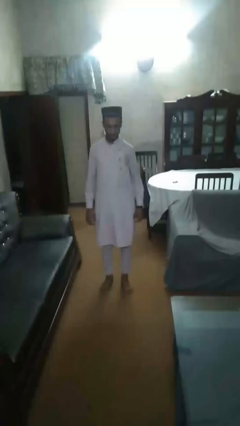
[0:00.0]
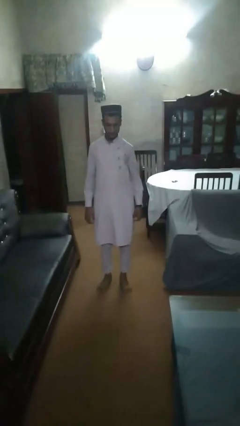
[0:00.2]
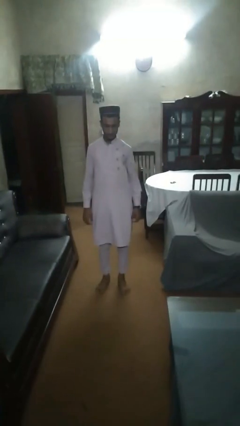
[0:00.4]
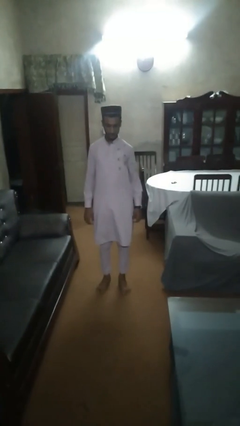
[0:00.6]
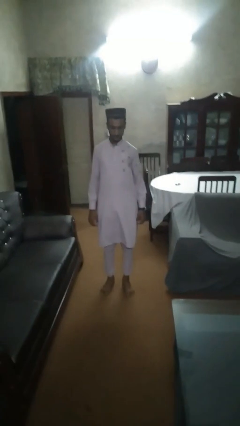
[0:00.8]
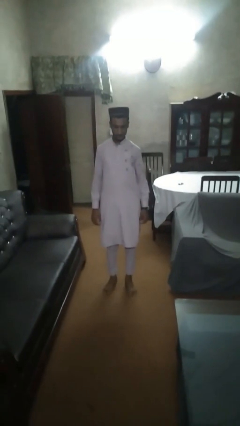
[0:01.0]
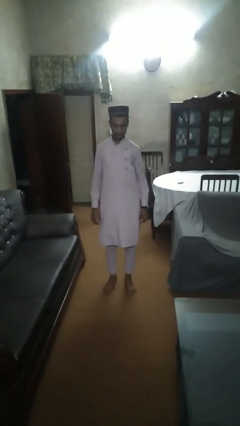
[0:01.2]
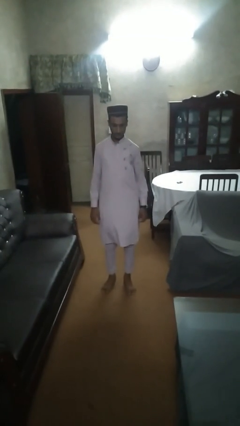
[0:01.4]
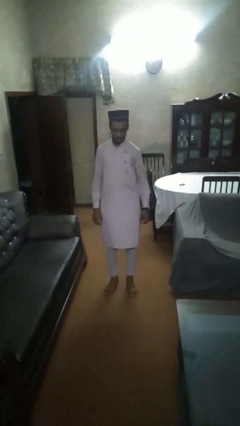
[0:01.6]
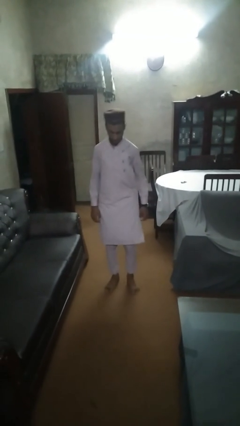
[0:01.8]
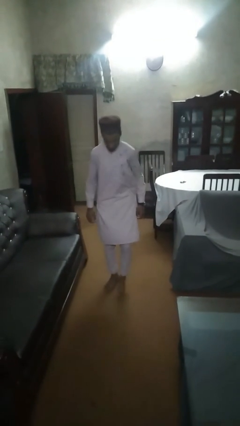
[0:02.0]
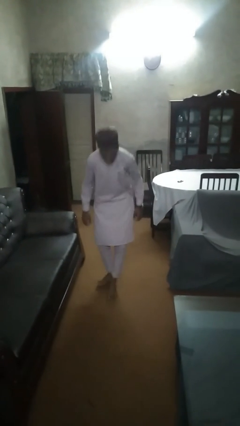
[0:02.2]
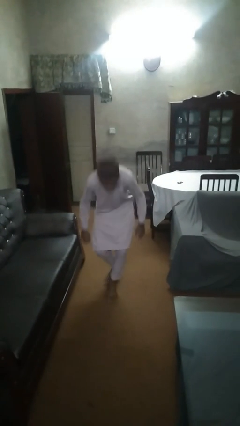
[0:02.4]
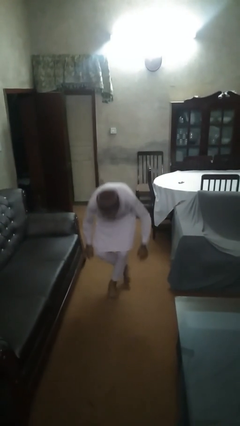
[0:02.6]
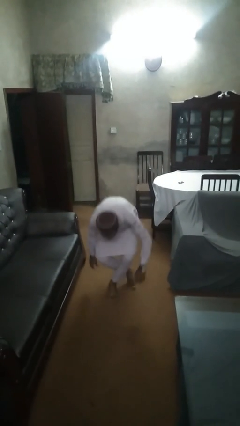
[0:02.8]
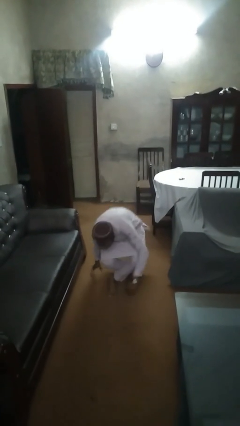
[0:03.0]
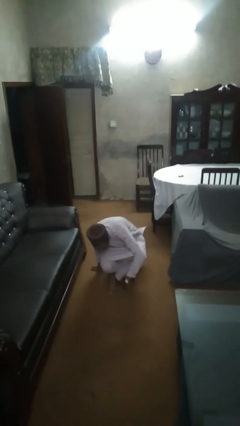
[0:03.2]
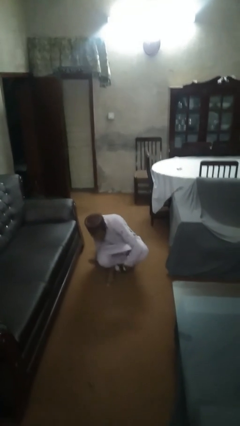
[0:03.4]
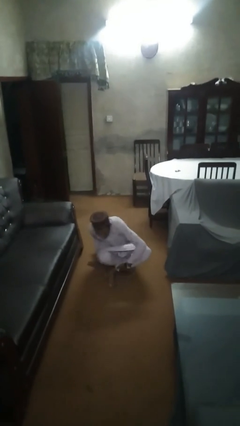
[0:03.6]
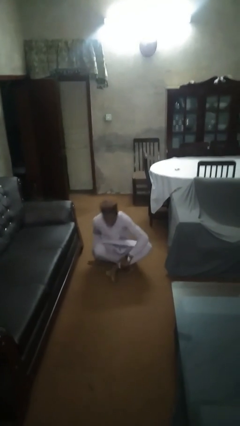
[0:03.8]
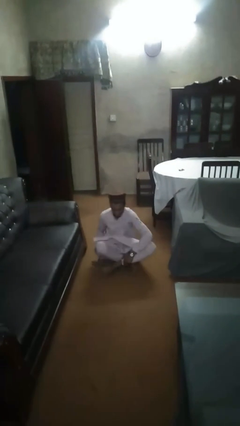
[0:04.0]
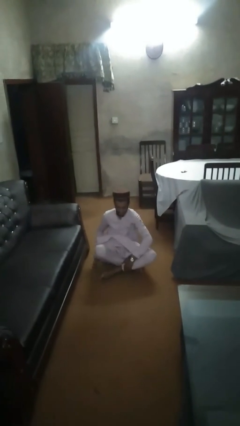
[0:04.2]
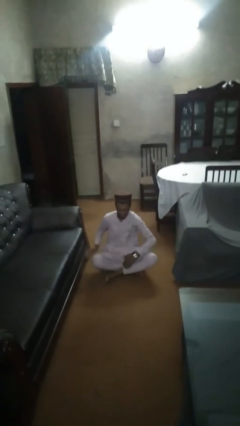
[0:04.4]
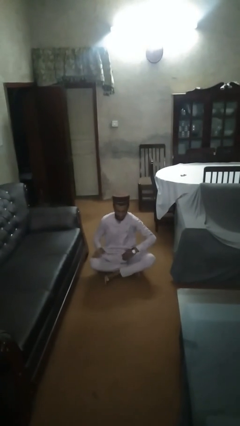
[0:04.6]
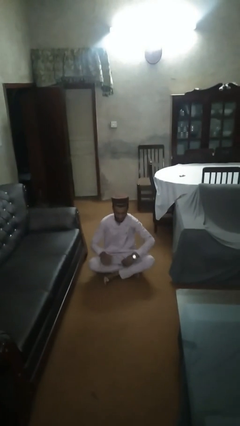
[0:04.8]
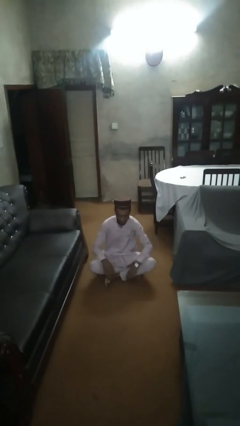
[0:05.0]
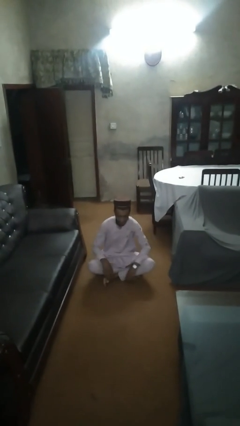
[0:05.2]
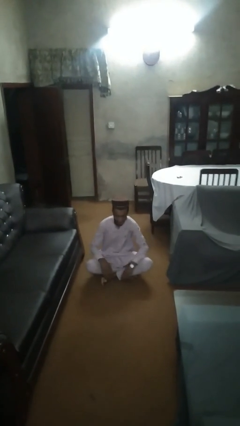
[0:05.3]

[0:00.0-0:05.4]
person sits crisscross

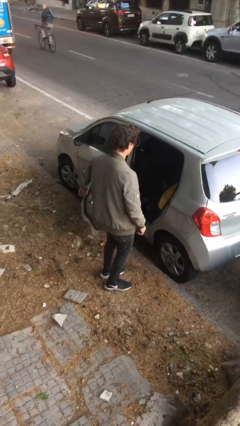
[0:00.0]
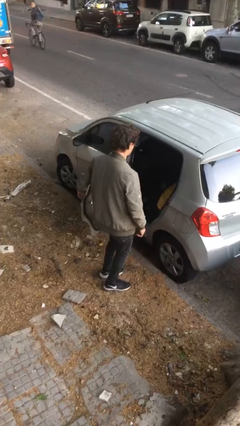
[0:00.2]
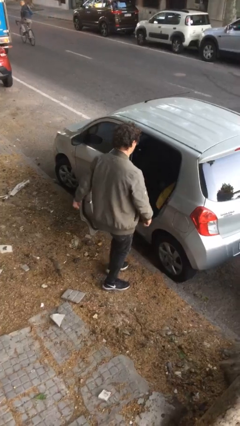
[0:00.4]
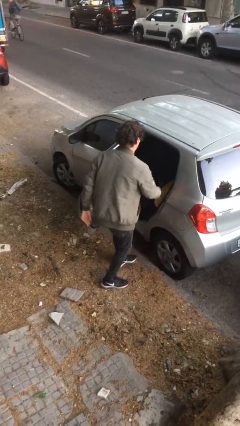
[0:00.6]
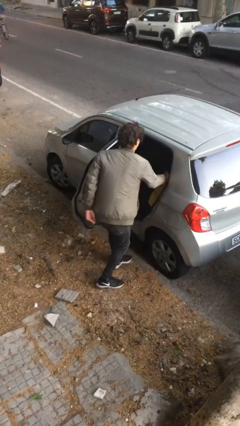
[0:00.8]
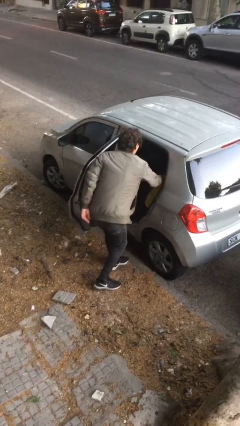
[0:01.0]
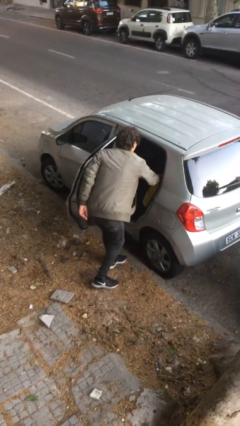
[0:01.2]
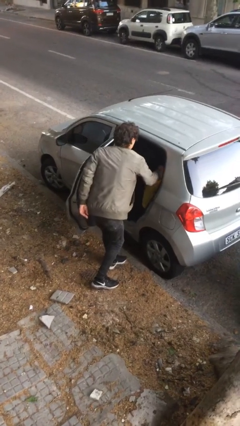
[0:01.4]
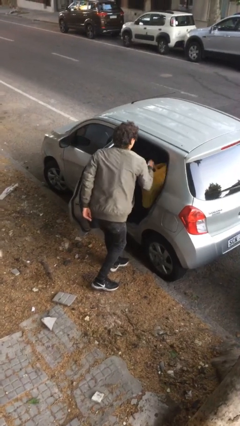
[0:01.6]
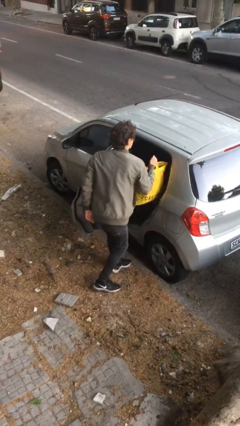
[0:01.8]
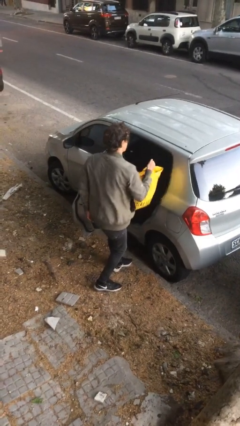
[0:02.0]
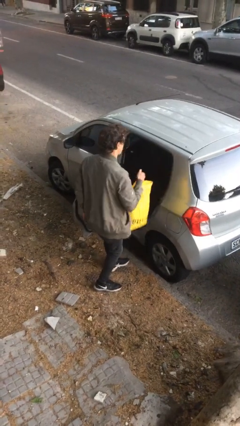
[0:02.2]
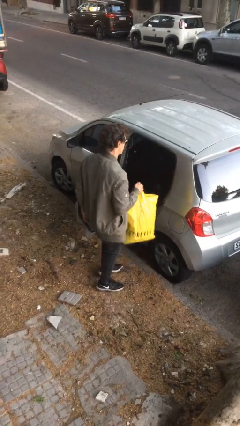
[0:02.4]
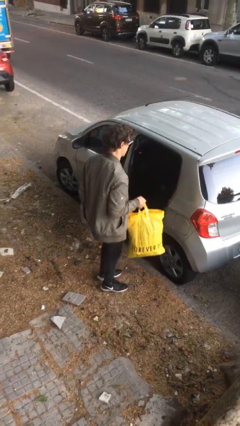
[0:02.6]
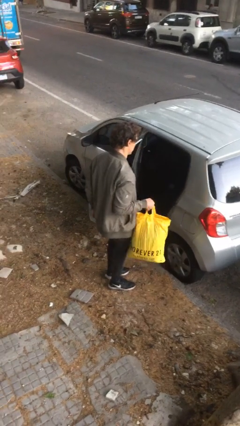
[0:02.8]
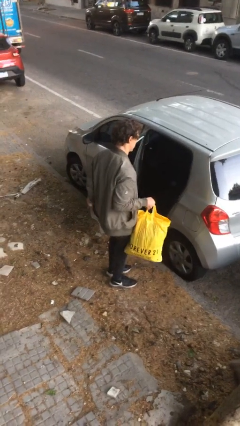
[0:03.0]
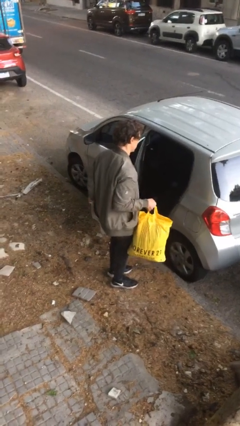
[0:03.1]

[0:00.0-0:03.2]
person unloads car

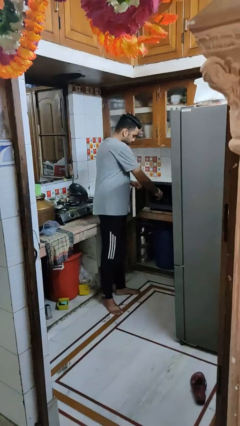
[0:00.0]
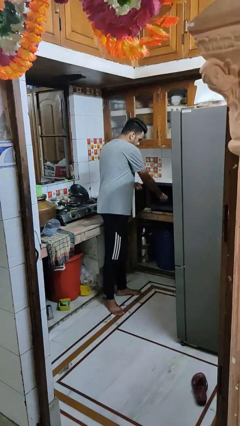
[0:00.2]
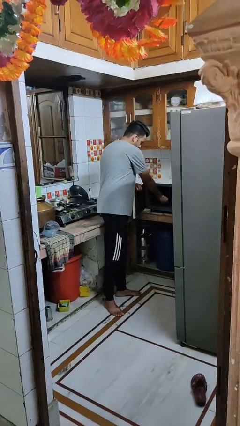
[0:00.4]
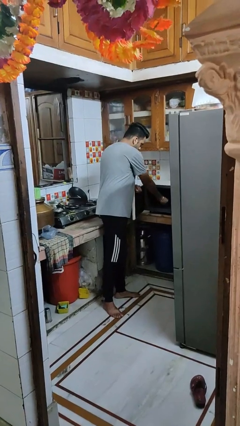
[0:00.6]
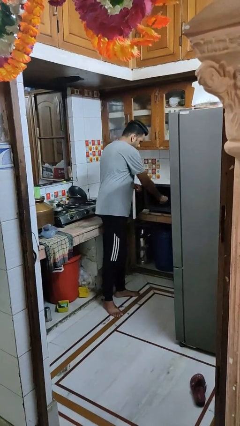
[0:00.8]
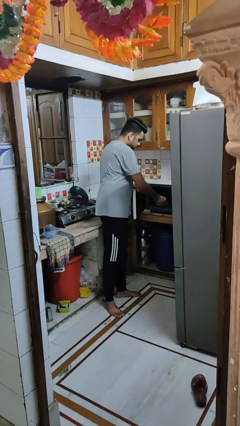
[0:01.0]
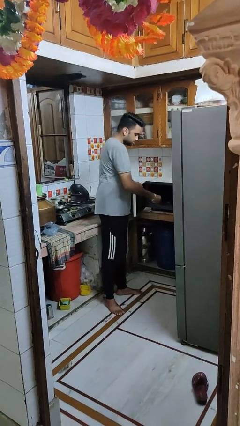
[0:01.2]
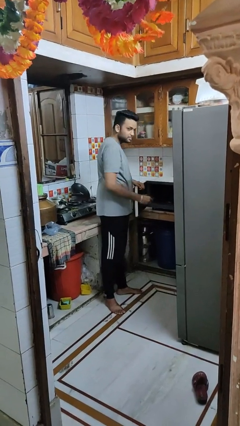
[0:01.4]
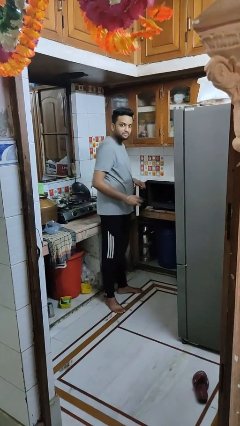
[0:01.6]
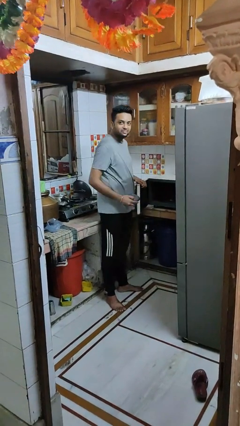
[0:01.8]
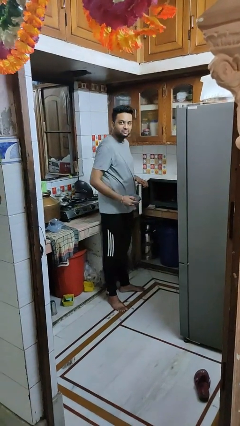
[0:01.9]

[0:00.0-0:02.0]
person takes object from microwave

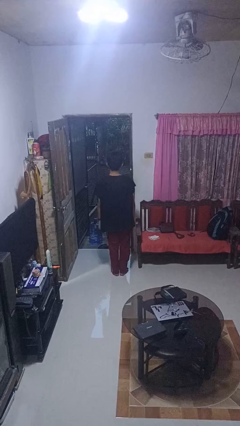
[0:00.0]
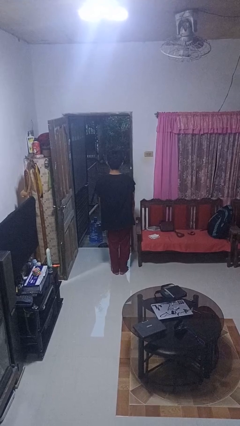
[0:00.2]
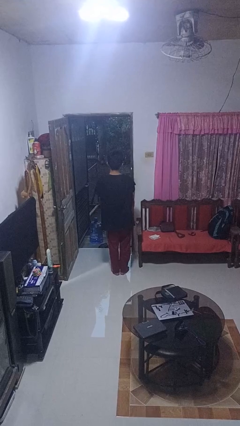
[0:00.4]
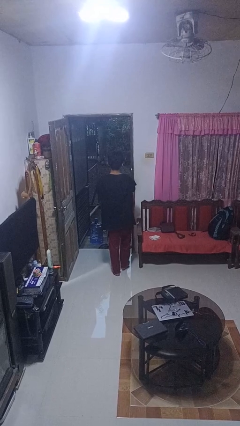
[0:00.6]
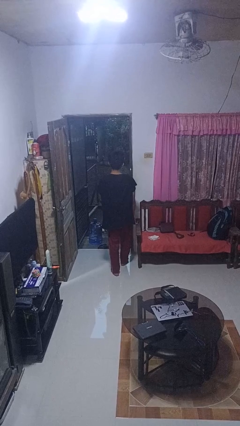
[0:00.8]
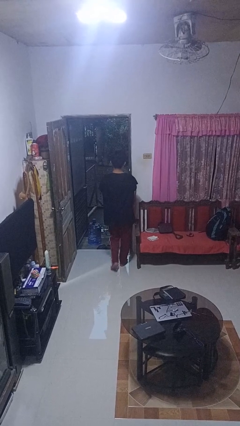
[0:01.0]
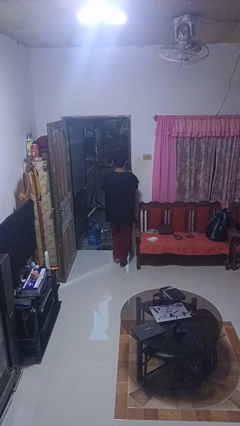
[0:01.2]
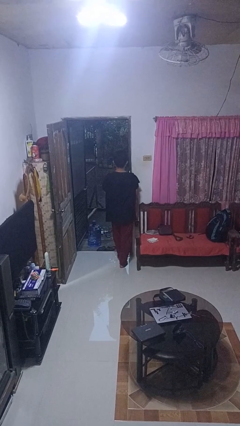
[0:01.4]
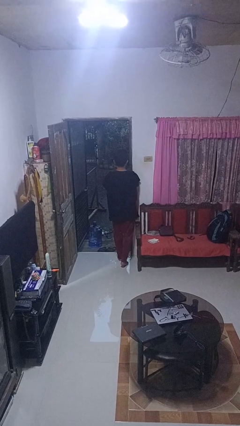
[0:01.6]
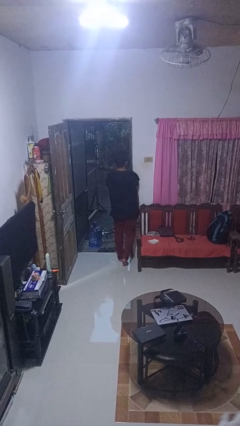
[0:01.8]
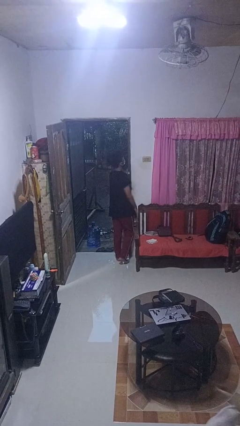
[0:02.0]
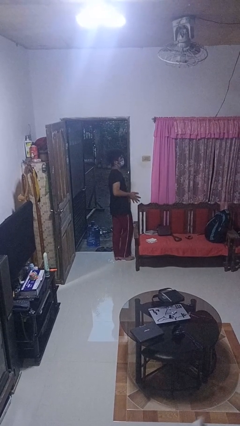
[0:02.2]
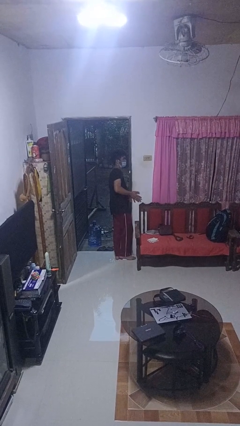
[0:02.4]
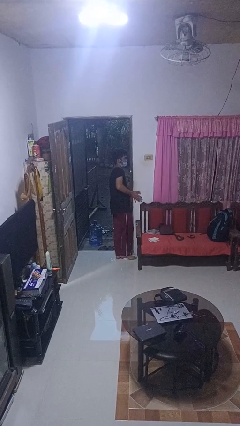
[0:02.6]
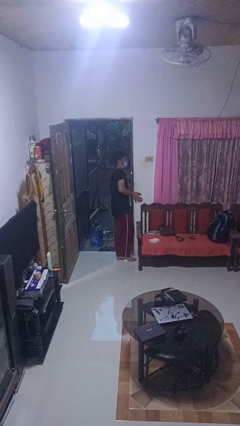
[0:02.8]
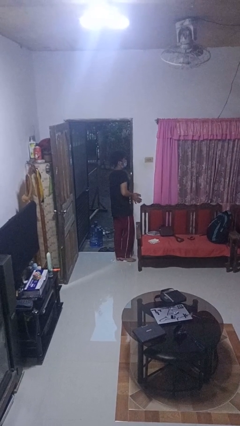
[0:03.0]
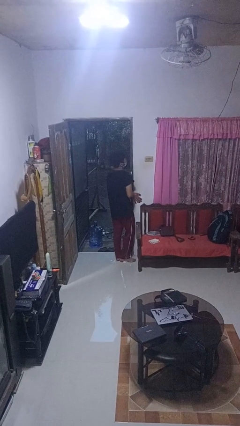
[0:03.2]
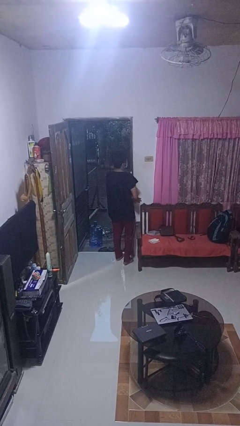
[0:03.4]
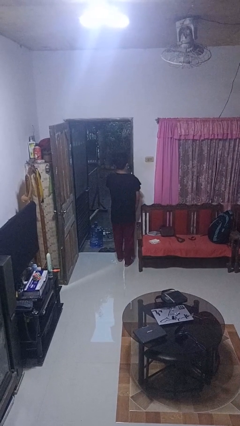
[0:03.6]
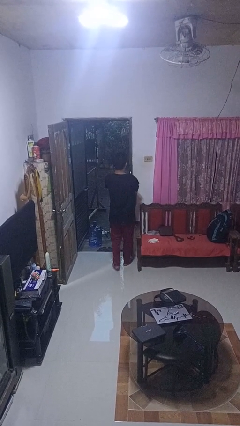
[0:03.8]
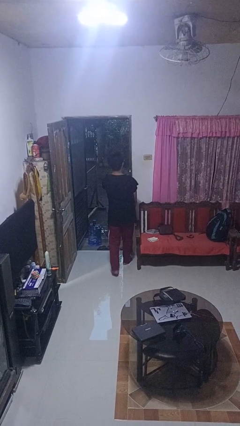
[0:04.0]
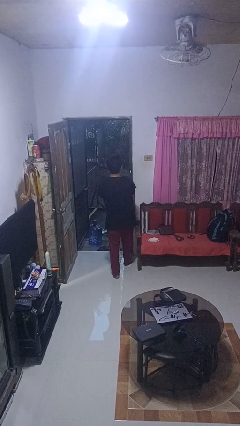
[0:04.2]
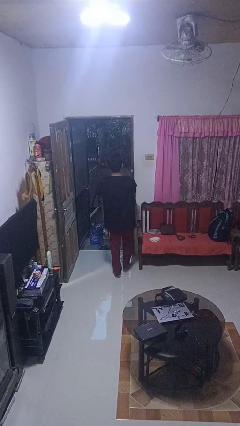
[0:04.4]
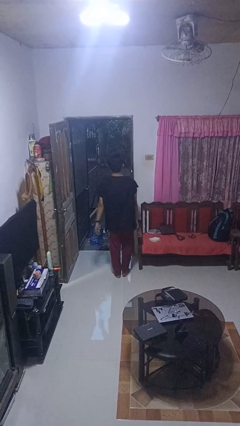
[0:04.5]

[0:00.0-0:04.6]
person bumps into wall

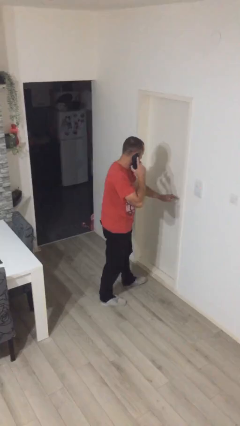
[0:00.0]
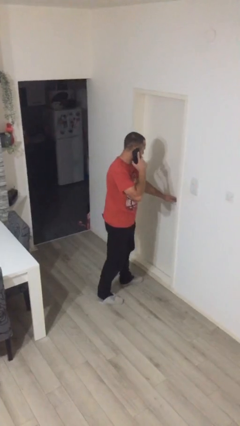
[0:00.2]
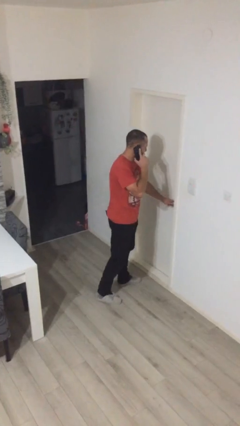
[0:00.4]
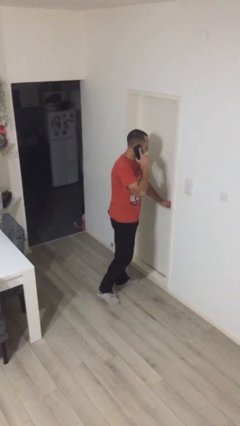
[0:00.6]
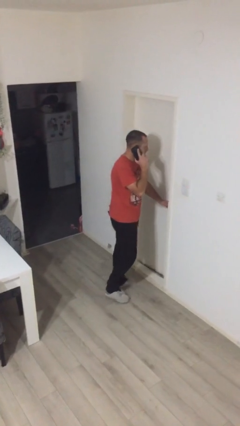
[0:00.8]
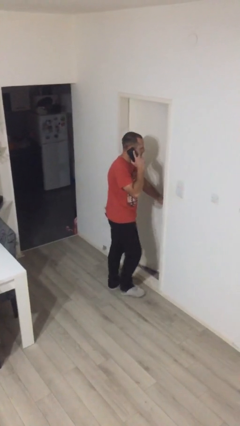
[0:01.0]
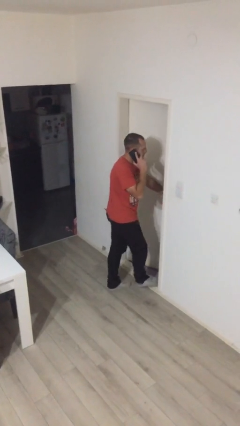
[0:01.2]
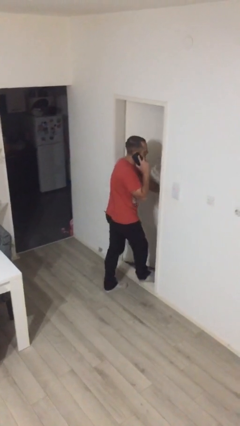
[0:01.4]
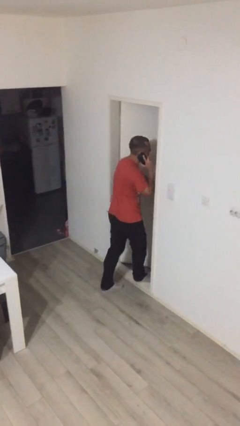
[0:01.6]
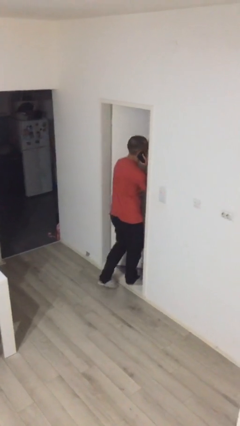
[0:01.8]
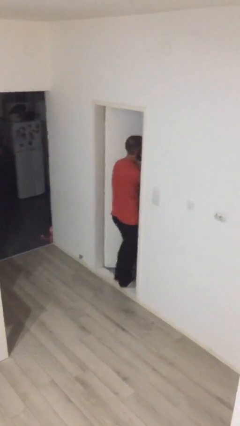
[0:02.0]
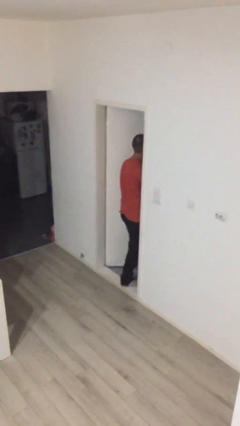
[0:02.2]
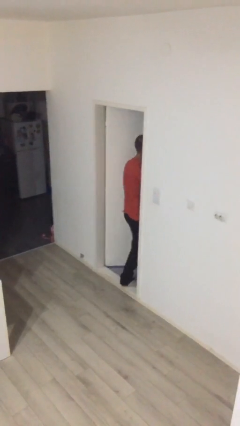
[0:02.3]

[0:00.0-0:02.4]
person opens facility door

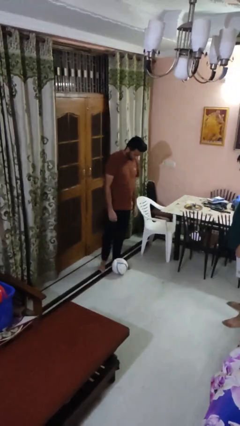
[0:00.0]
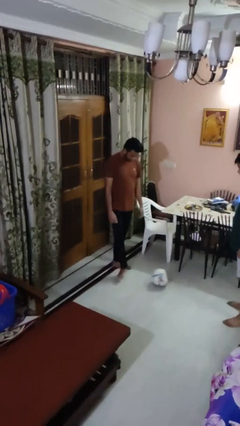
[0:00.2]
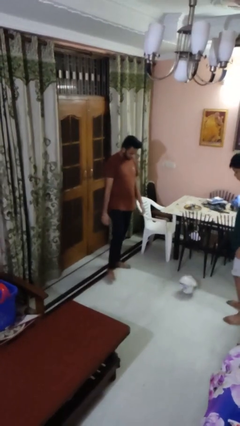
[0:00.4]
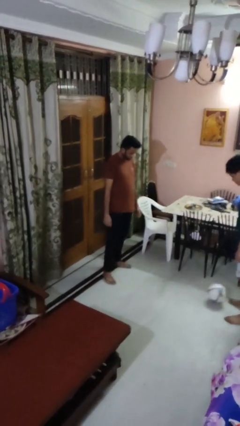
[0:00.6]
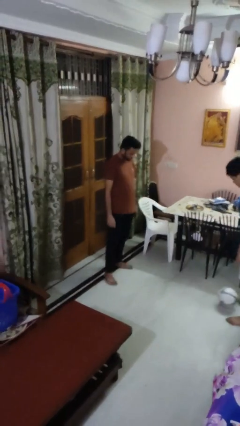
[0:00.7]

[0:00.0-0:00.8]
person kicks object to person
